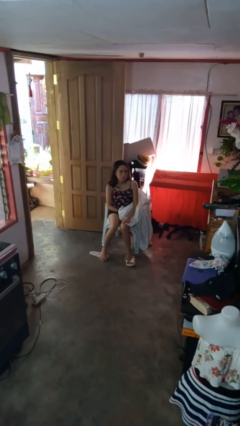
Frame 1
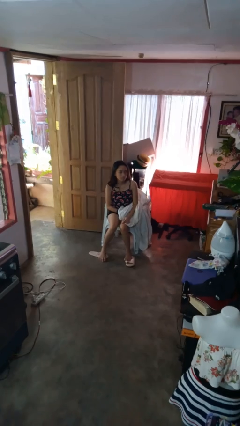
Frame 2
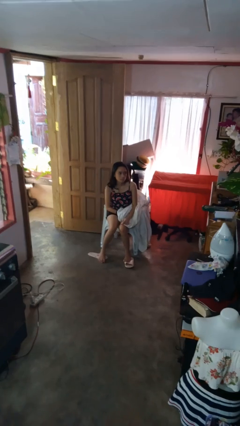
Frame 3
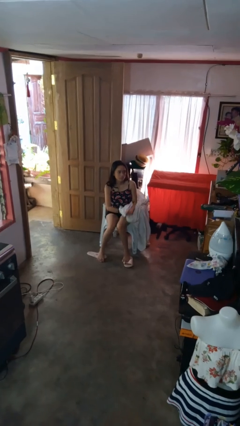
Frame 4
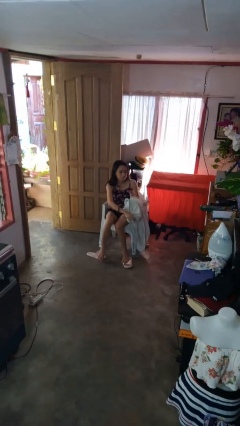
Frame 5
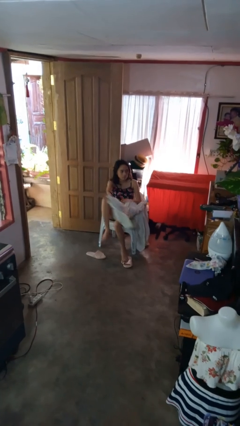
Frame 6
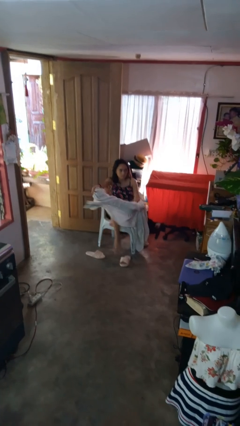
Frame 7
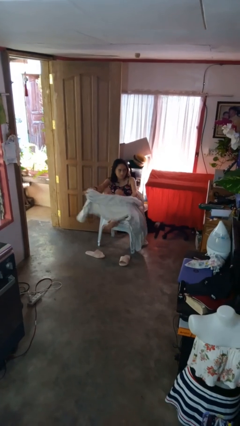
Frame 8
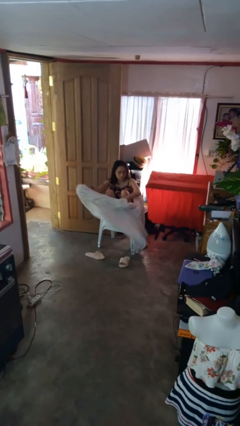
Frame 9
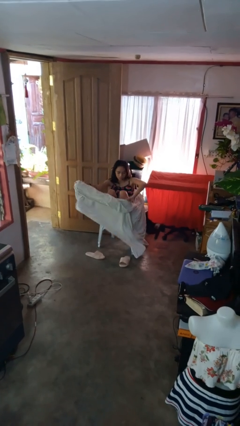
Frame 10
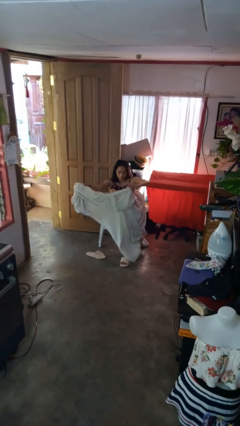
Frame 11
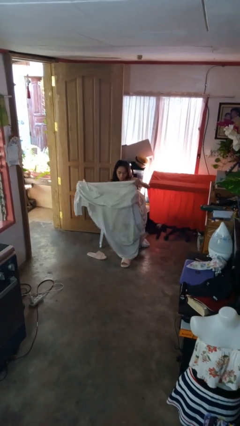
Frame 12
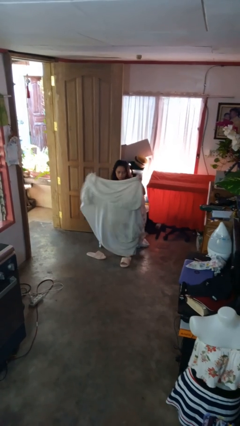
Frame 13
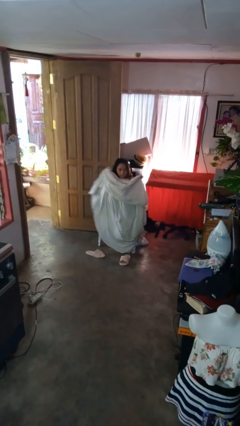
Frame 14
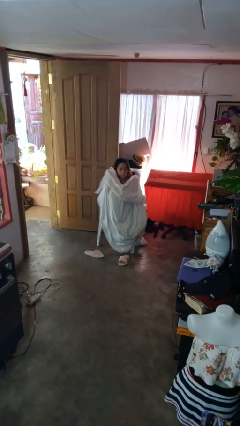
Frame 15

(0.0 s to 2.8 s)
person covers with blanket

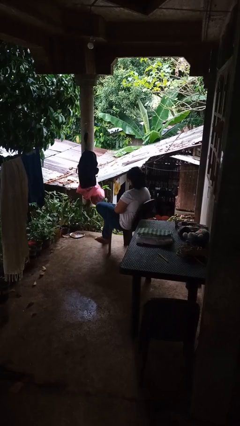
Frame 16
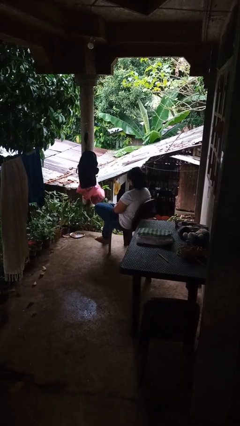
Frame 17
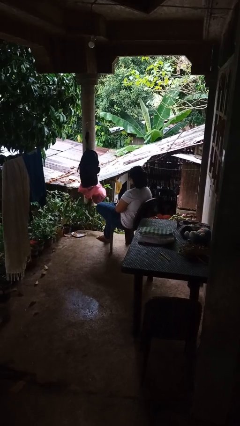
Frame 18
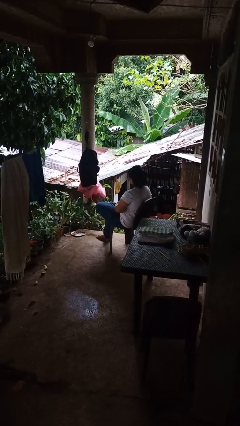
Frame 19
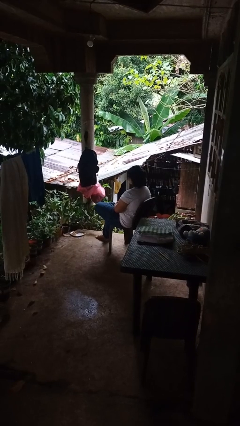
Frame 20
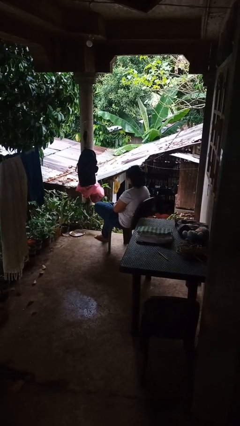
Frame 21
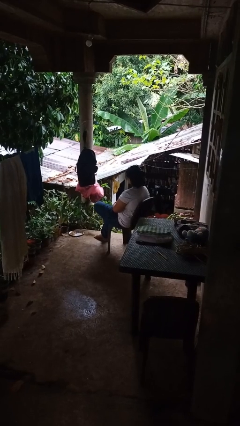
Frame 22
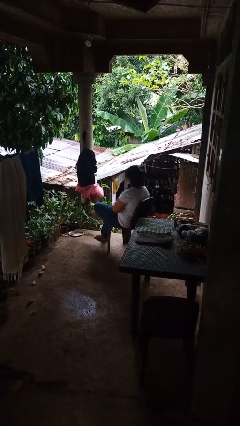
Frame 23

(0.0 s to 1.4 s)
person crosses legs

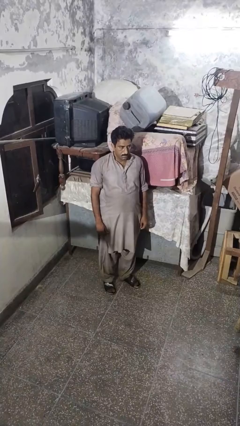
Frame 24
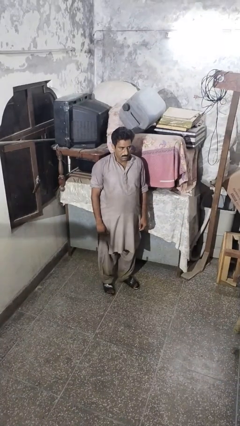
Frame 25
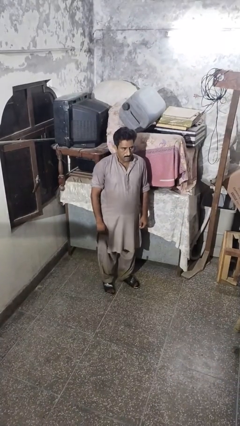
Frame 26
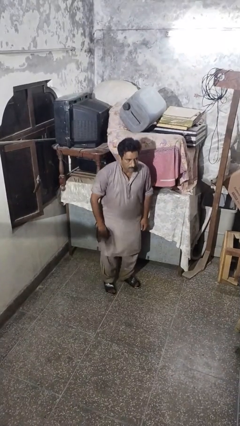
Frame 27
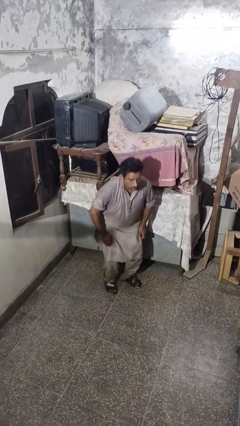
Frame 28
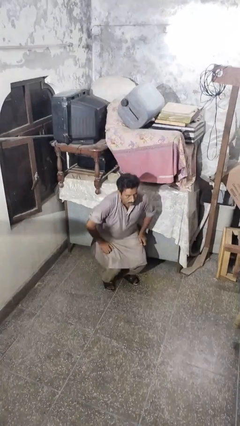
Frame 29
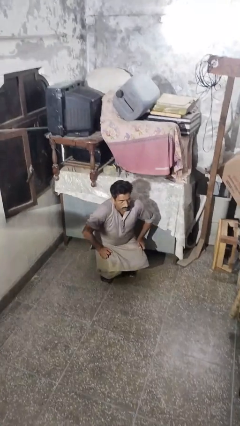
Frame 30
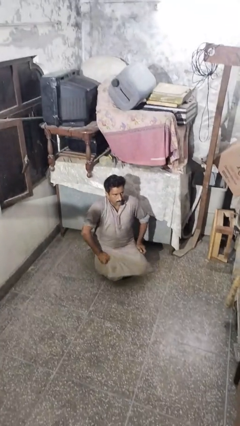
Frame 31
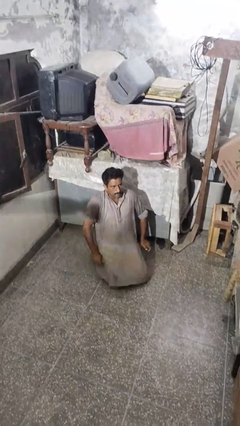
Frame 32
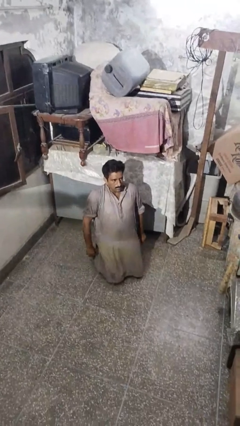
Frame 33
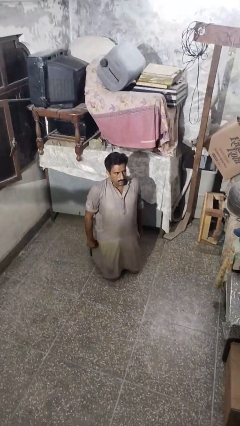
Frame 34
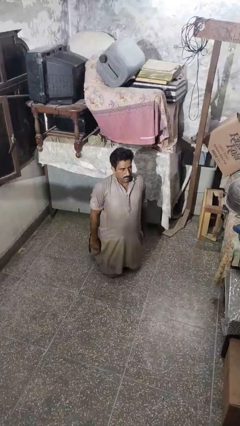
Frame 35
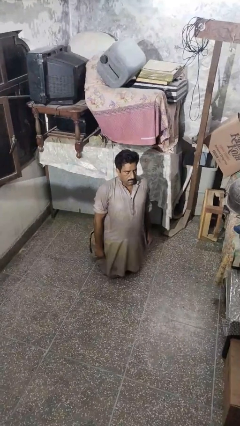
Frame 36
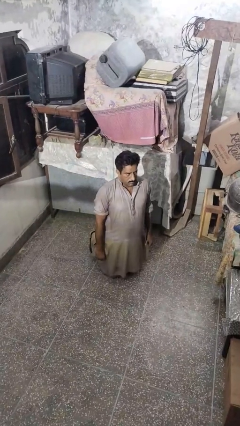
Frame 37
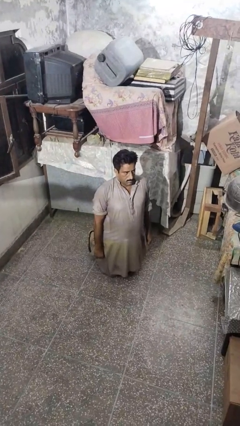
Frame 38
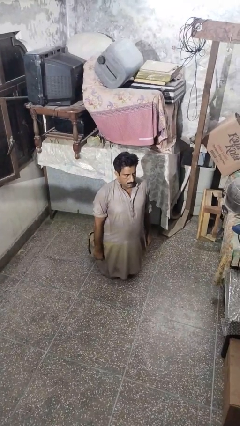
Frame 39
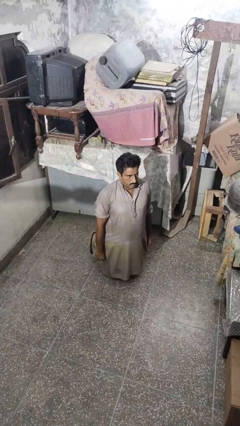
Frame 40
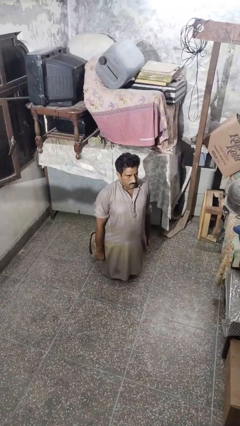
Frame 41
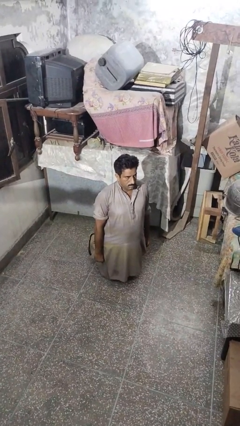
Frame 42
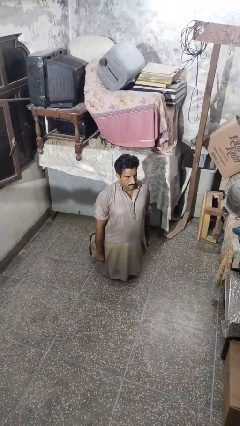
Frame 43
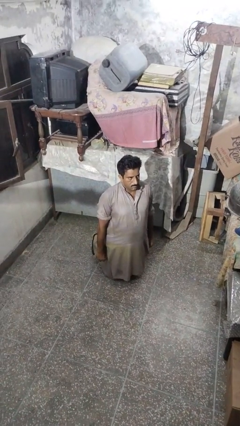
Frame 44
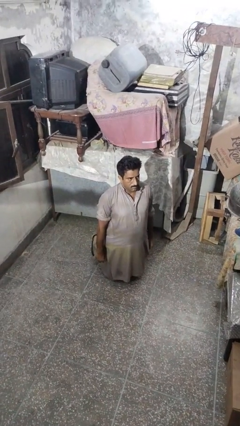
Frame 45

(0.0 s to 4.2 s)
person kneels

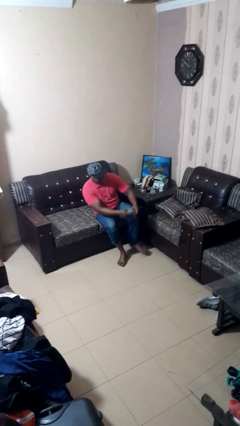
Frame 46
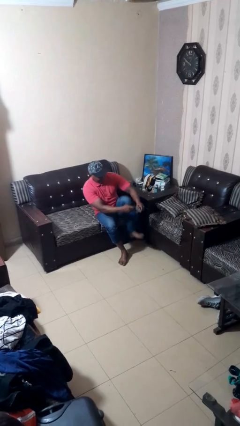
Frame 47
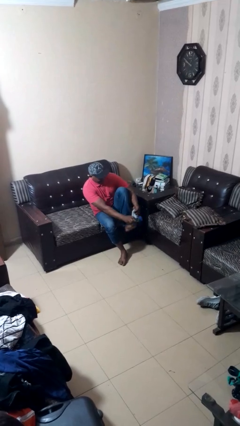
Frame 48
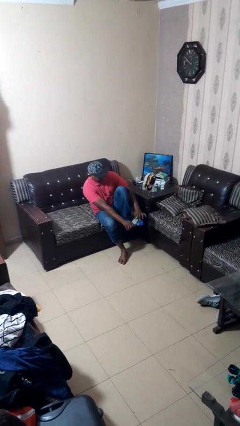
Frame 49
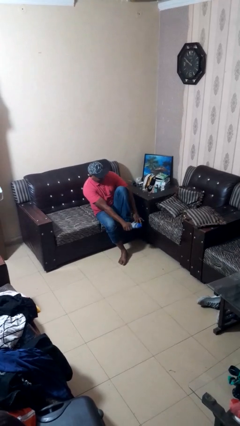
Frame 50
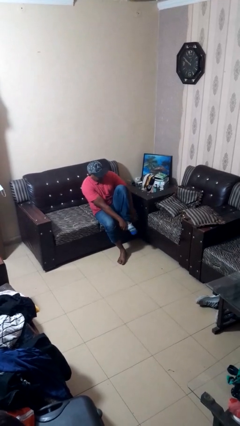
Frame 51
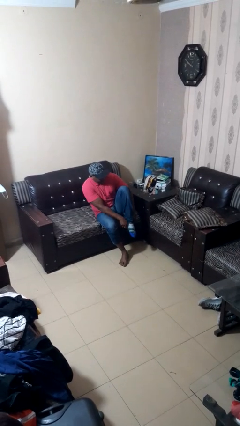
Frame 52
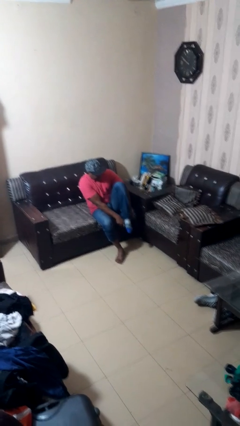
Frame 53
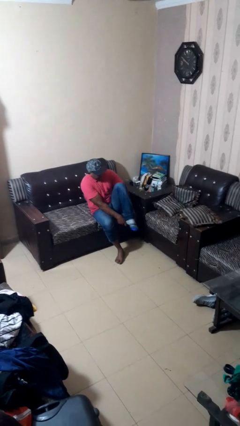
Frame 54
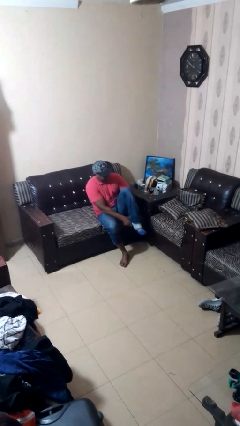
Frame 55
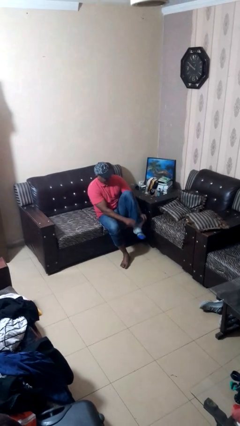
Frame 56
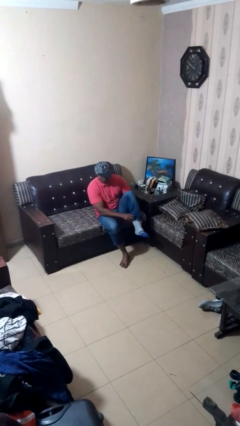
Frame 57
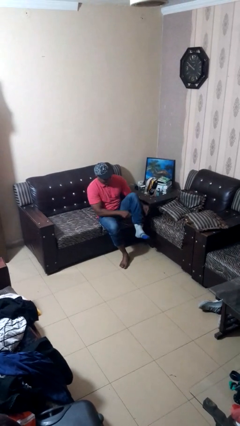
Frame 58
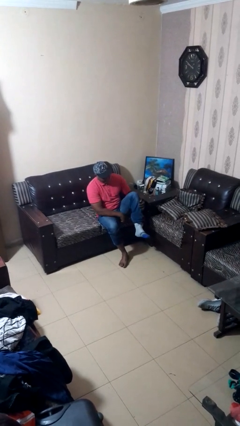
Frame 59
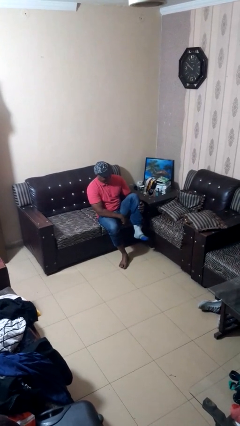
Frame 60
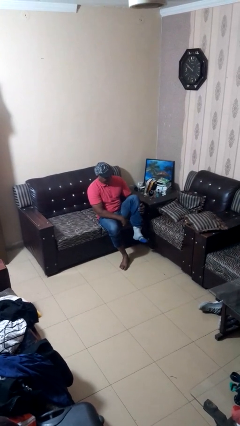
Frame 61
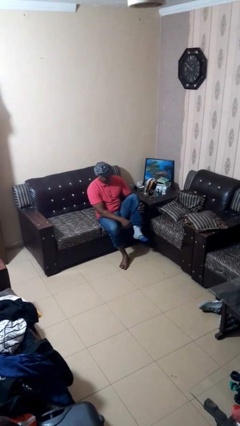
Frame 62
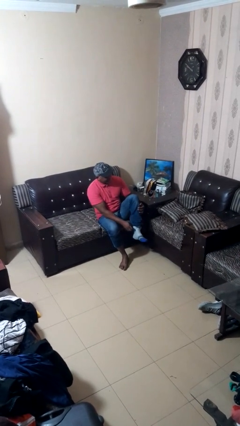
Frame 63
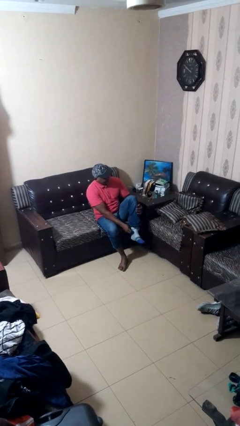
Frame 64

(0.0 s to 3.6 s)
person puts on socks

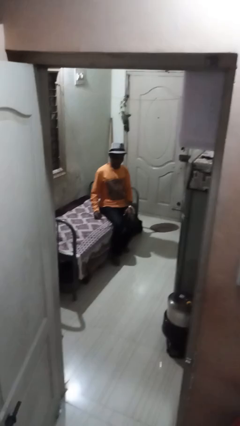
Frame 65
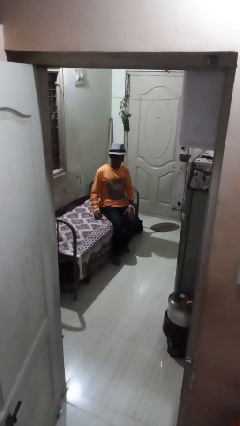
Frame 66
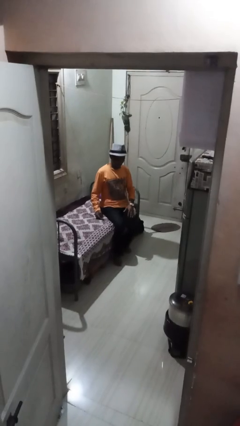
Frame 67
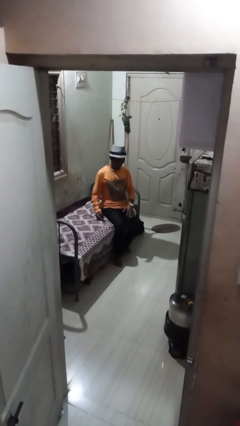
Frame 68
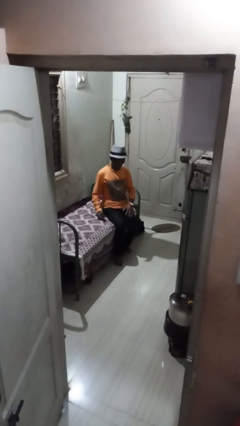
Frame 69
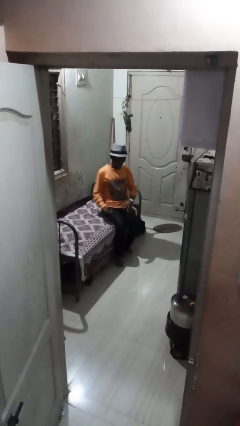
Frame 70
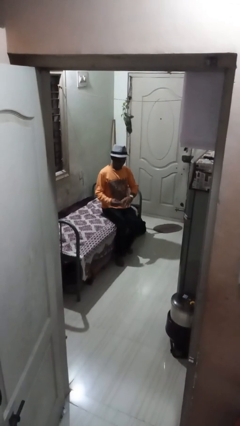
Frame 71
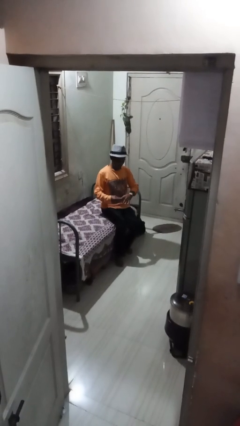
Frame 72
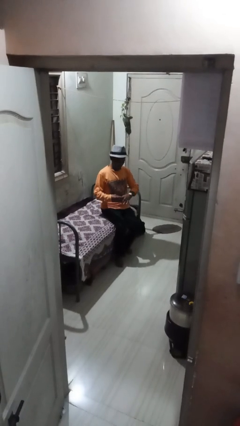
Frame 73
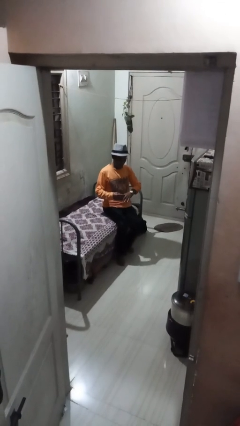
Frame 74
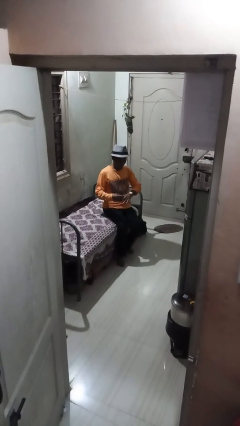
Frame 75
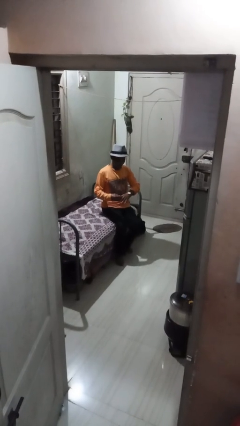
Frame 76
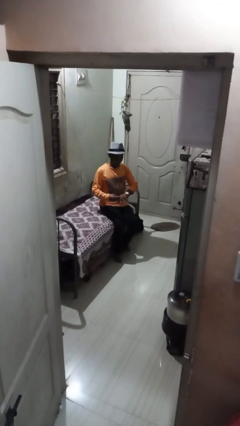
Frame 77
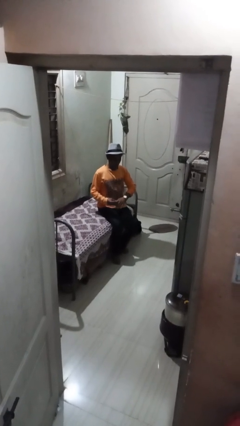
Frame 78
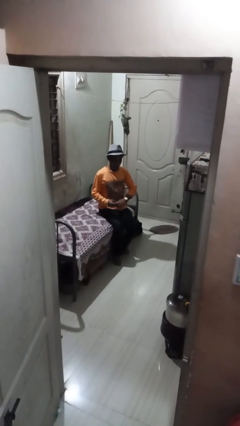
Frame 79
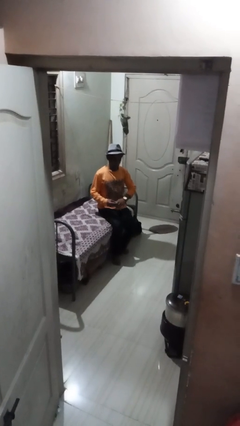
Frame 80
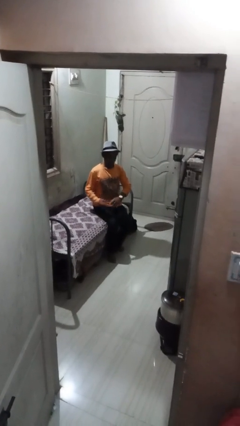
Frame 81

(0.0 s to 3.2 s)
person puts on ring

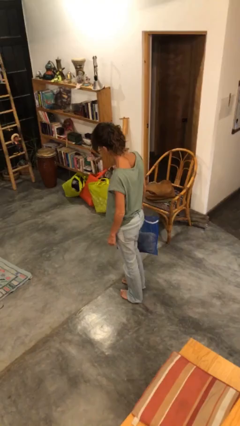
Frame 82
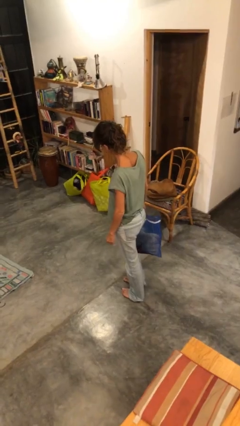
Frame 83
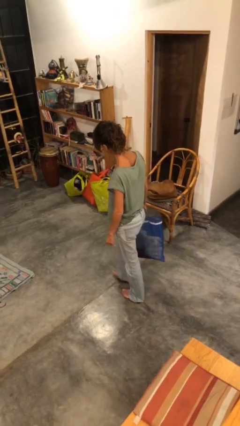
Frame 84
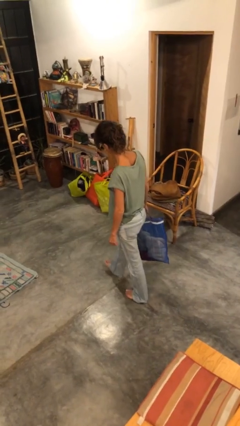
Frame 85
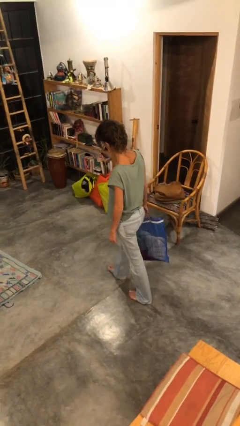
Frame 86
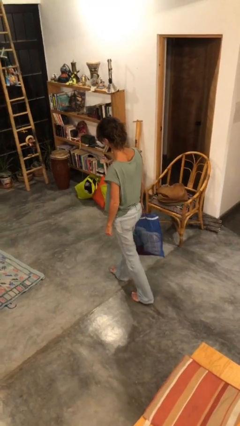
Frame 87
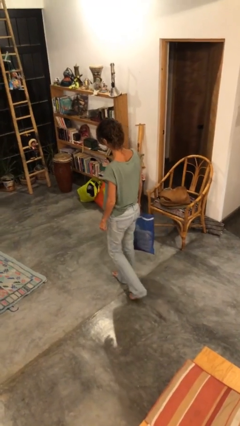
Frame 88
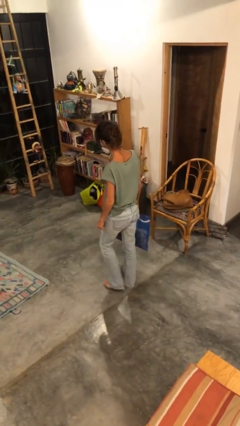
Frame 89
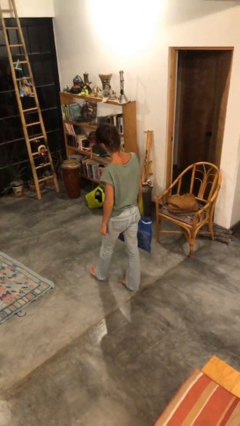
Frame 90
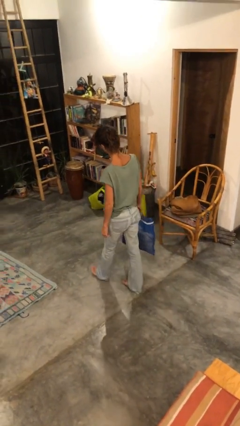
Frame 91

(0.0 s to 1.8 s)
person carries groceries

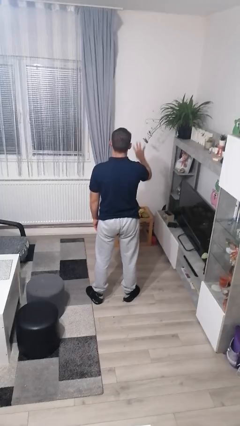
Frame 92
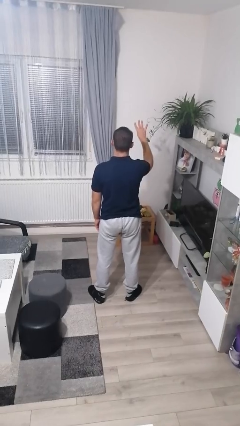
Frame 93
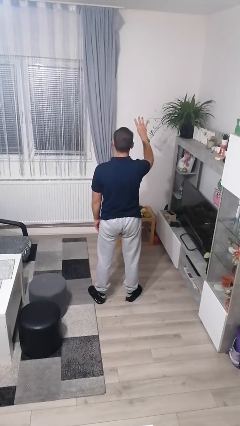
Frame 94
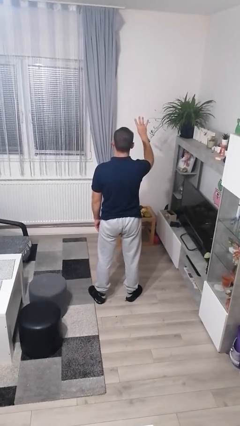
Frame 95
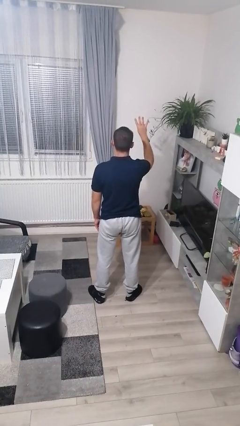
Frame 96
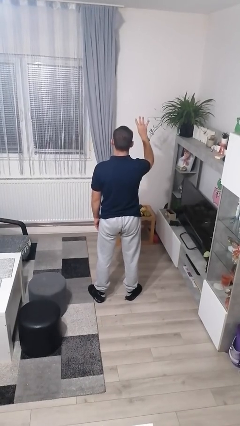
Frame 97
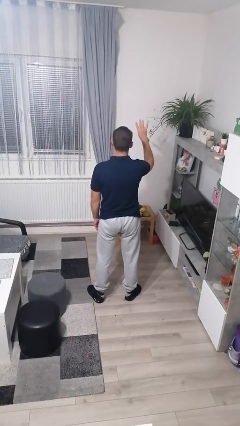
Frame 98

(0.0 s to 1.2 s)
person gestures number four
